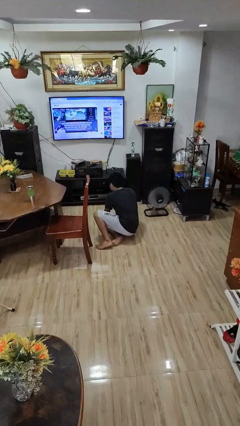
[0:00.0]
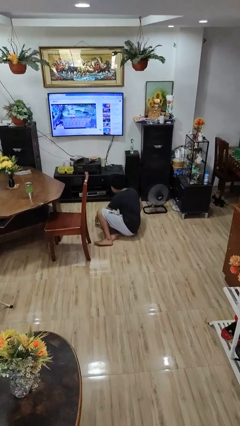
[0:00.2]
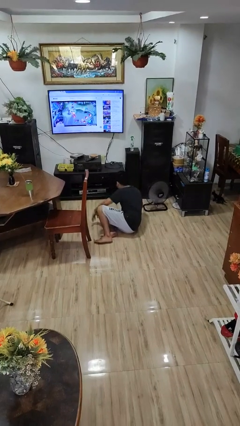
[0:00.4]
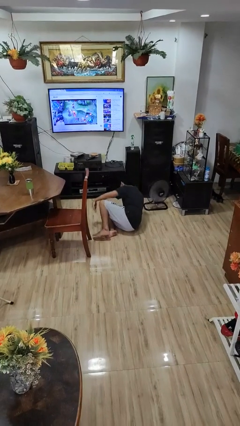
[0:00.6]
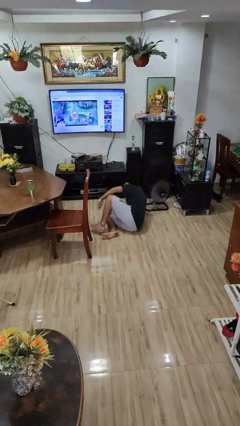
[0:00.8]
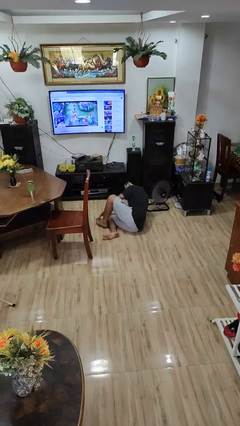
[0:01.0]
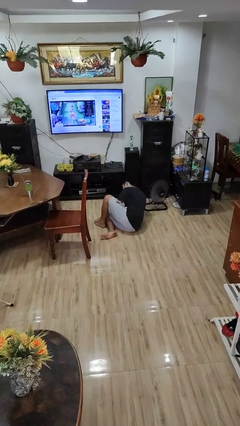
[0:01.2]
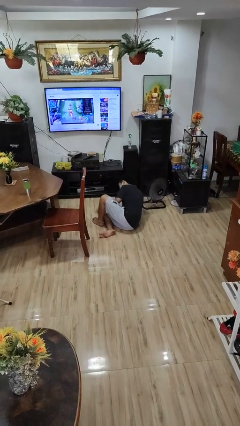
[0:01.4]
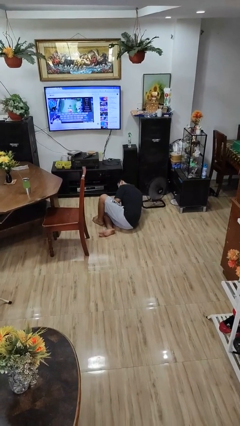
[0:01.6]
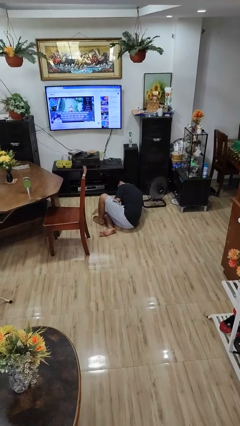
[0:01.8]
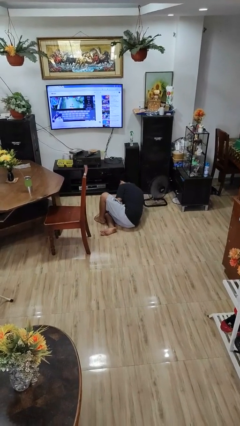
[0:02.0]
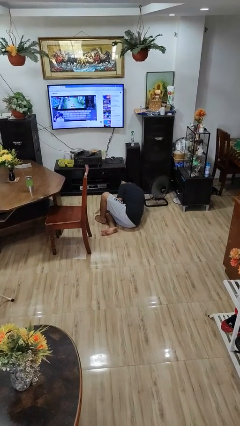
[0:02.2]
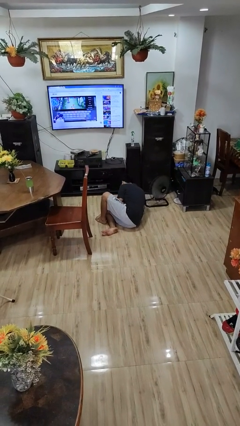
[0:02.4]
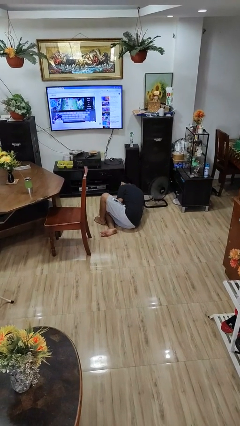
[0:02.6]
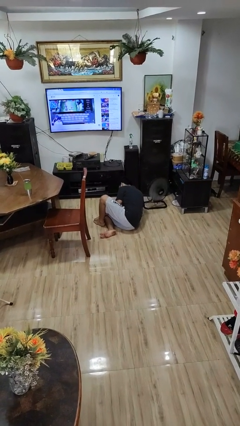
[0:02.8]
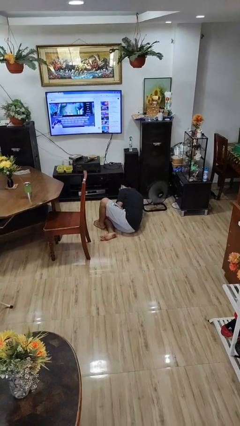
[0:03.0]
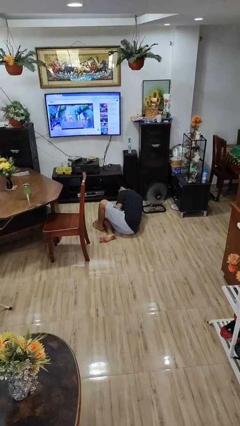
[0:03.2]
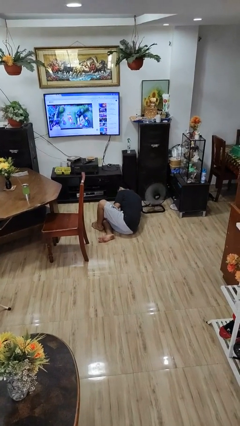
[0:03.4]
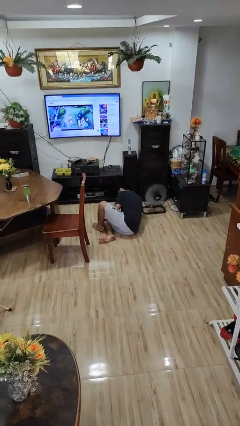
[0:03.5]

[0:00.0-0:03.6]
person lies down on floor

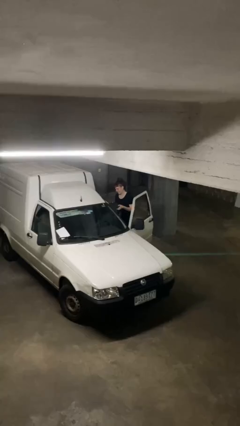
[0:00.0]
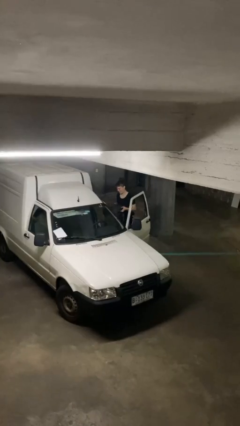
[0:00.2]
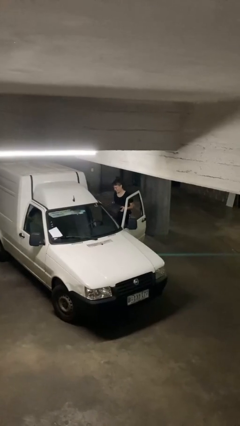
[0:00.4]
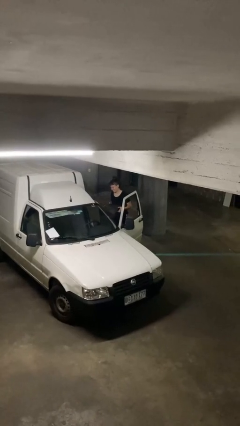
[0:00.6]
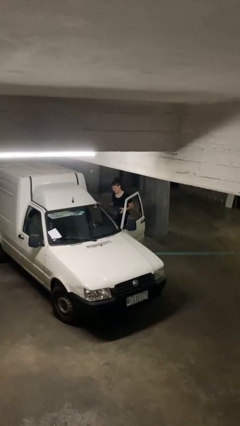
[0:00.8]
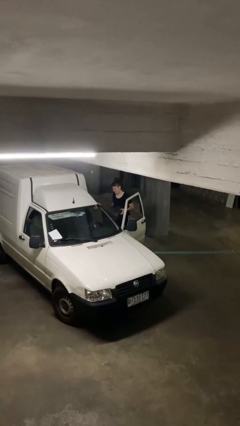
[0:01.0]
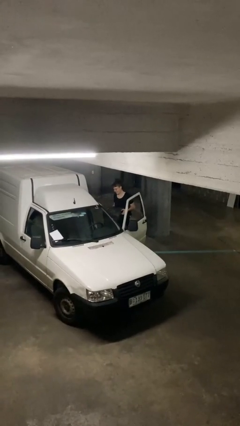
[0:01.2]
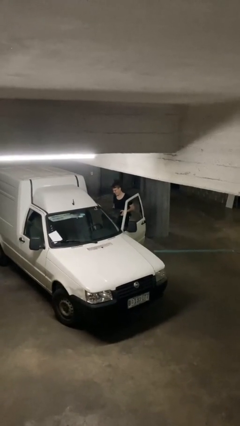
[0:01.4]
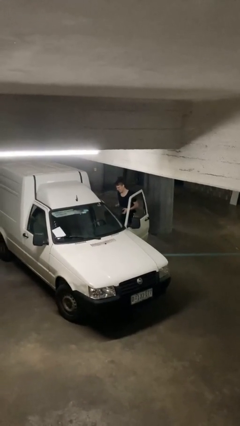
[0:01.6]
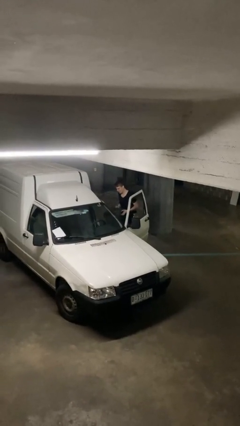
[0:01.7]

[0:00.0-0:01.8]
person unloads car

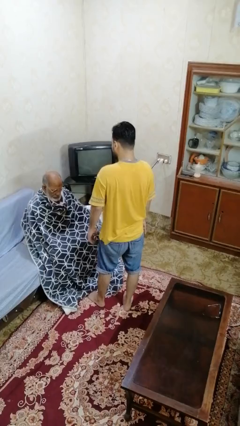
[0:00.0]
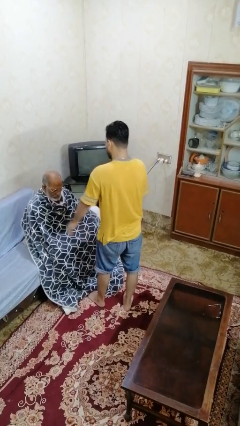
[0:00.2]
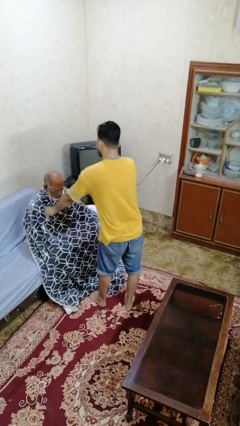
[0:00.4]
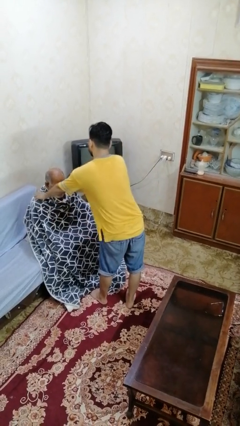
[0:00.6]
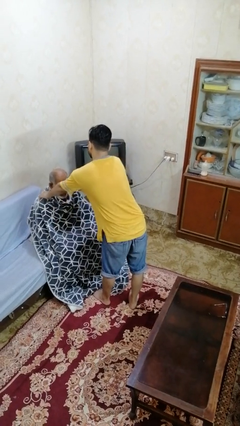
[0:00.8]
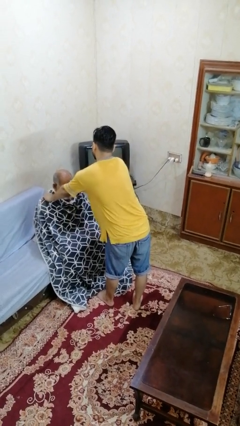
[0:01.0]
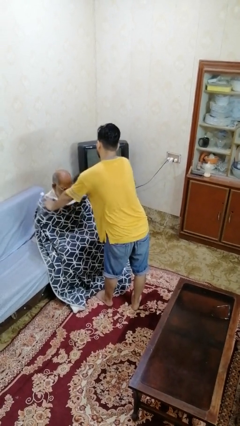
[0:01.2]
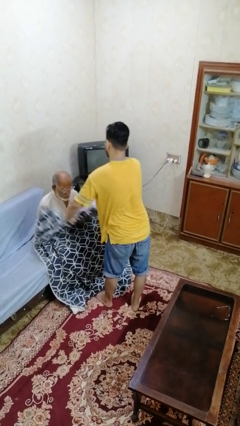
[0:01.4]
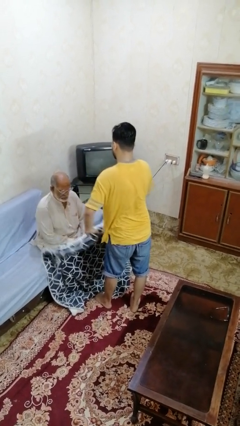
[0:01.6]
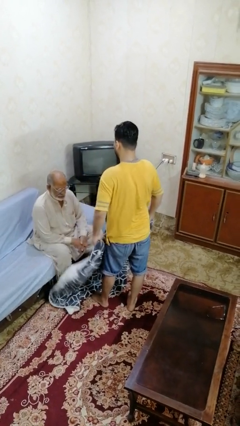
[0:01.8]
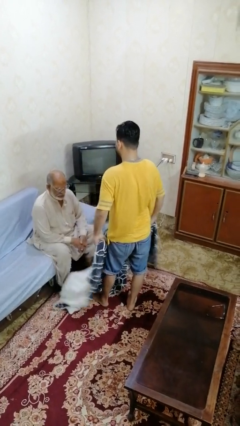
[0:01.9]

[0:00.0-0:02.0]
person uncovers friend with blanket

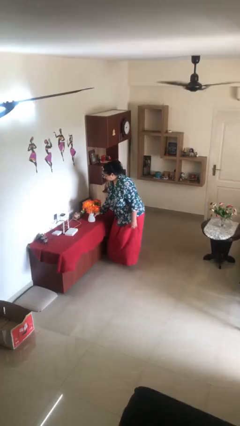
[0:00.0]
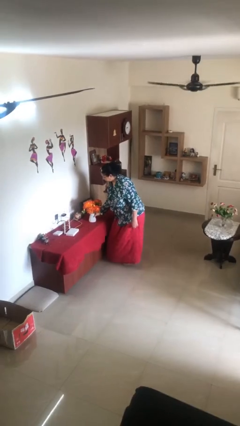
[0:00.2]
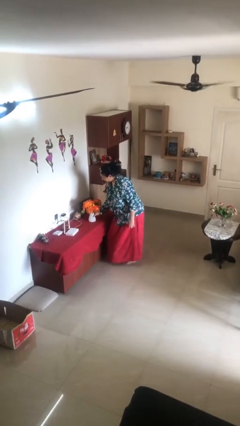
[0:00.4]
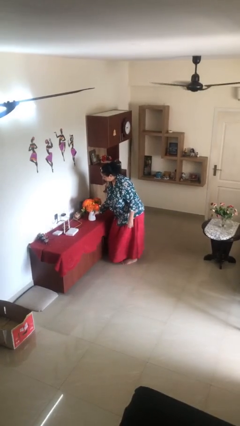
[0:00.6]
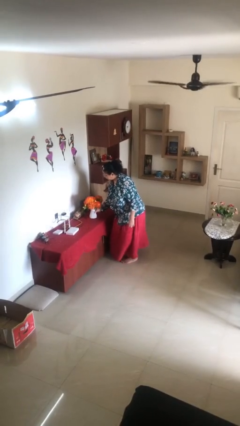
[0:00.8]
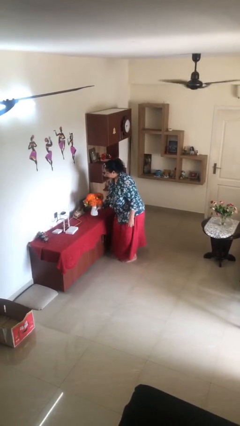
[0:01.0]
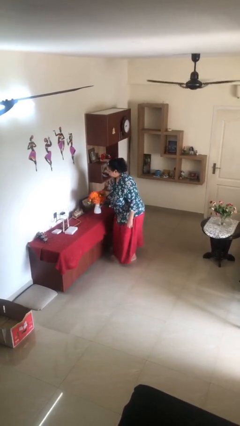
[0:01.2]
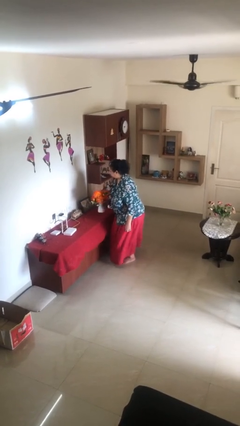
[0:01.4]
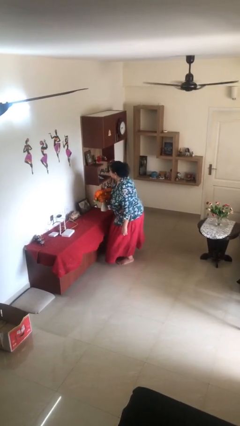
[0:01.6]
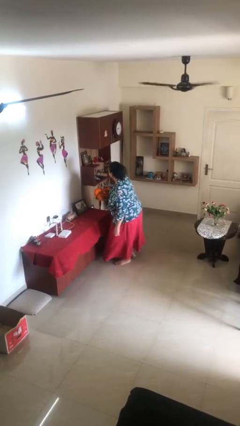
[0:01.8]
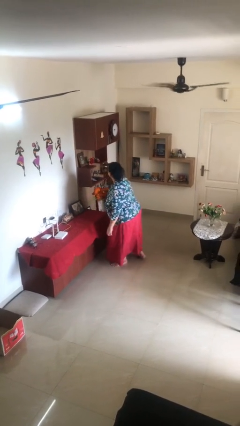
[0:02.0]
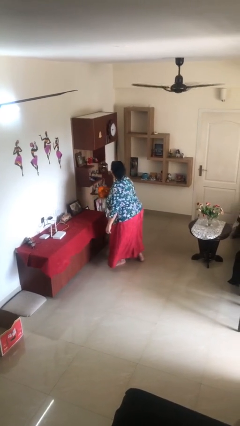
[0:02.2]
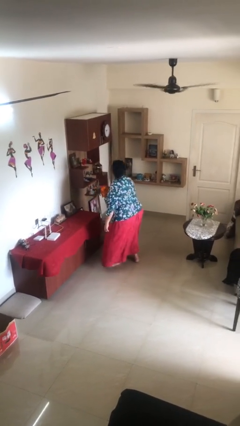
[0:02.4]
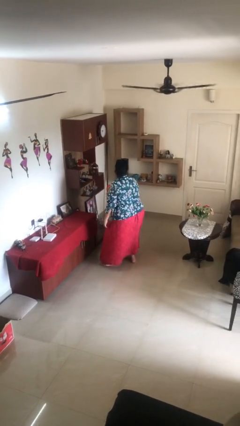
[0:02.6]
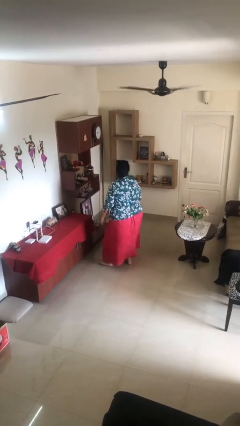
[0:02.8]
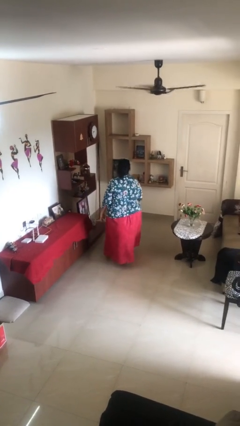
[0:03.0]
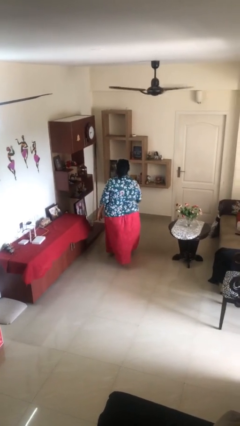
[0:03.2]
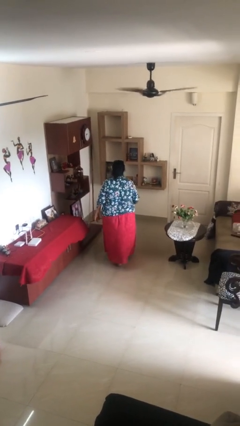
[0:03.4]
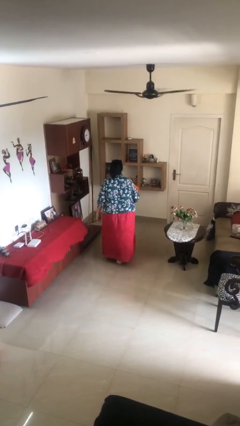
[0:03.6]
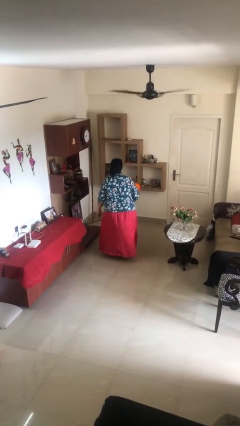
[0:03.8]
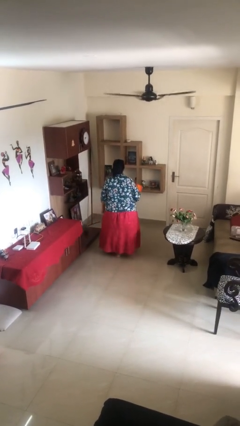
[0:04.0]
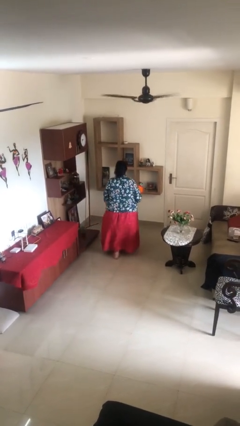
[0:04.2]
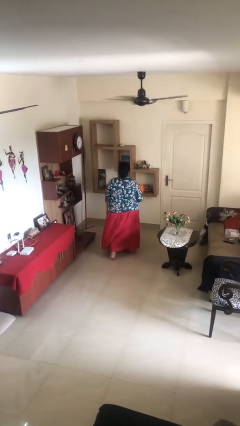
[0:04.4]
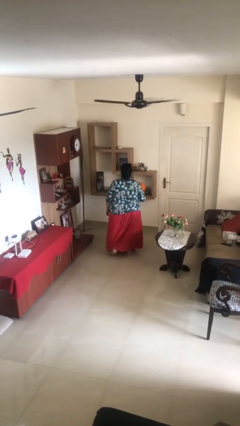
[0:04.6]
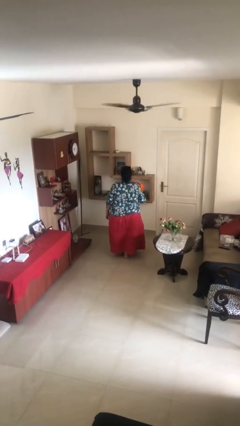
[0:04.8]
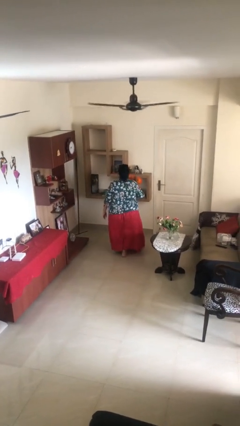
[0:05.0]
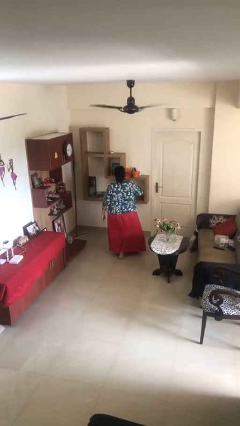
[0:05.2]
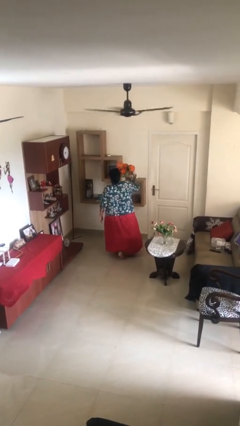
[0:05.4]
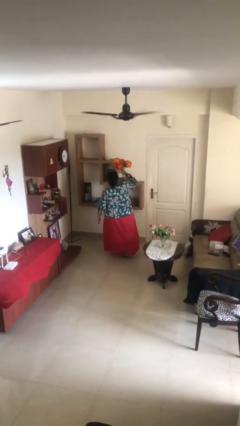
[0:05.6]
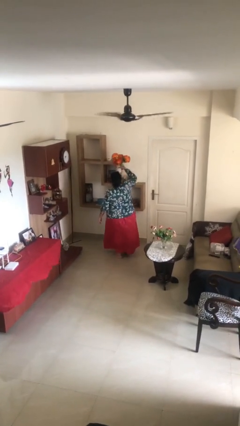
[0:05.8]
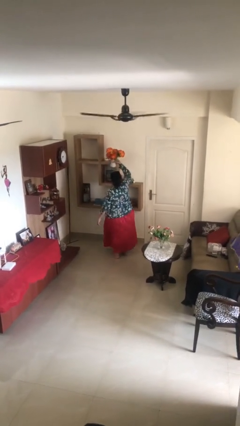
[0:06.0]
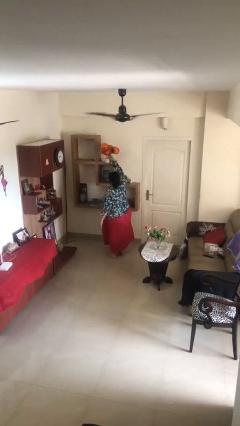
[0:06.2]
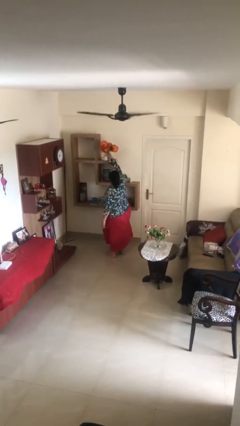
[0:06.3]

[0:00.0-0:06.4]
person picks up object from table

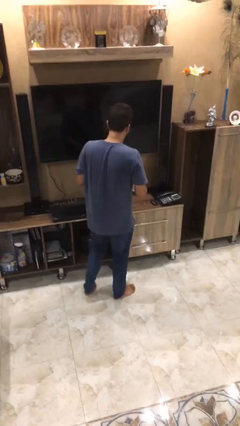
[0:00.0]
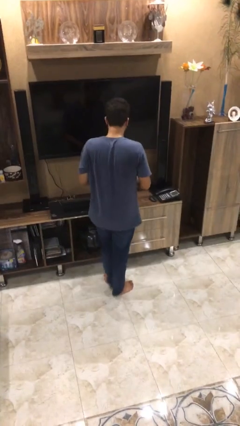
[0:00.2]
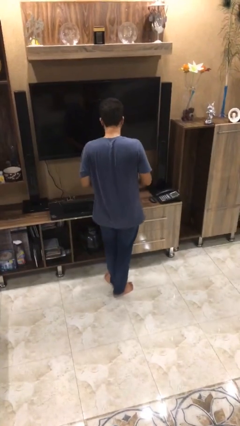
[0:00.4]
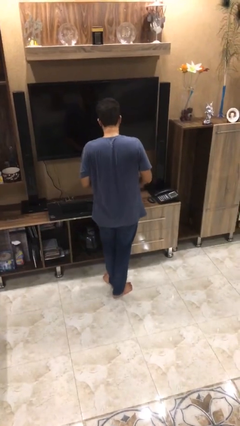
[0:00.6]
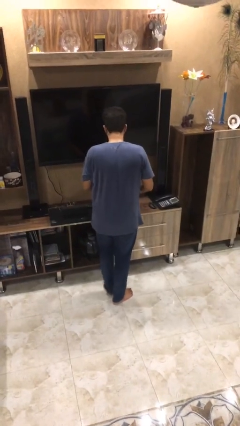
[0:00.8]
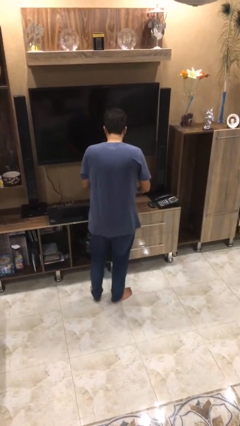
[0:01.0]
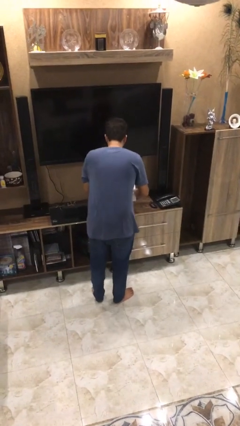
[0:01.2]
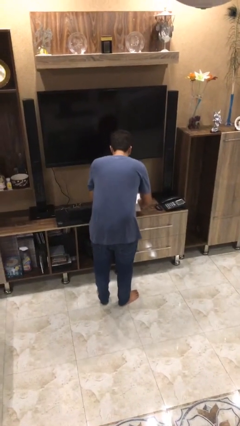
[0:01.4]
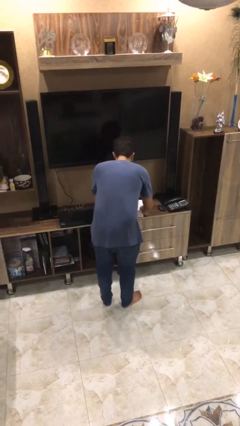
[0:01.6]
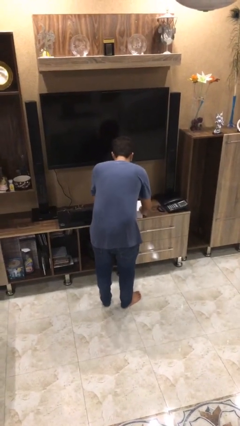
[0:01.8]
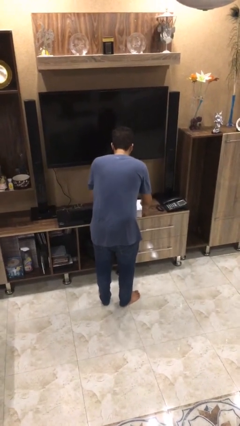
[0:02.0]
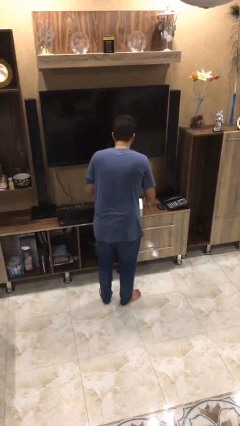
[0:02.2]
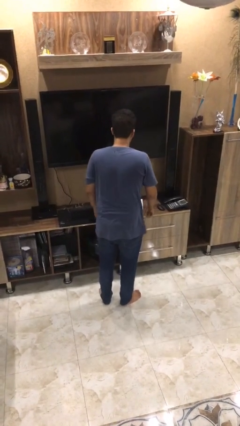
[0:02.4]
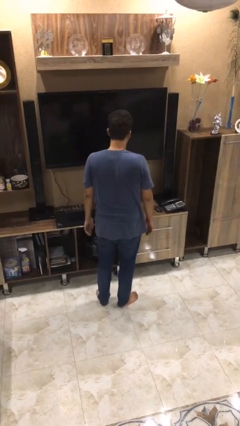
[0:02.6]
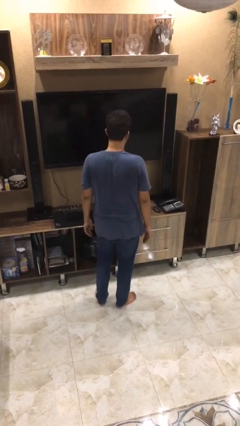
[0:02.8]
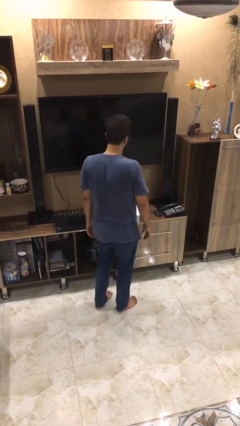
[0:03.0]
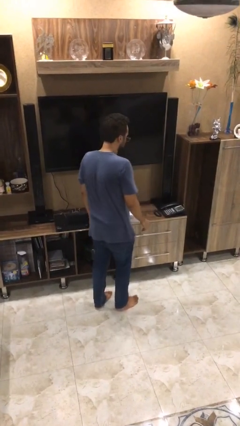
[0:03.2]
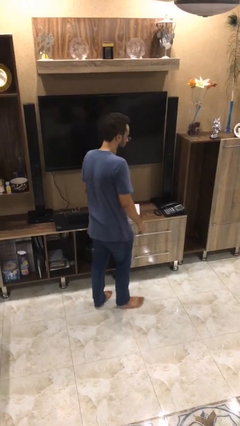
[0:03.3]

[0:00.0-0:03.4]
person puts down object on table

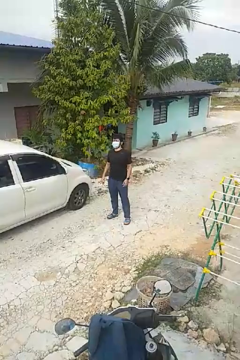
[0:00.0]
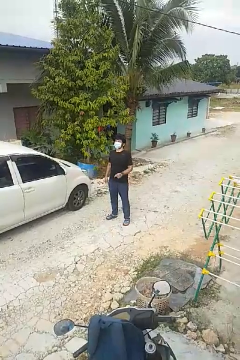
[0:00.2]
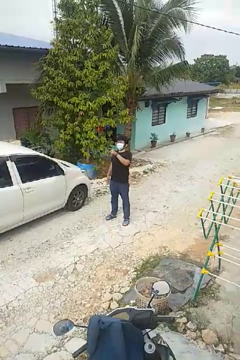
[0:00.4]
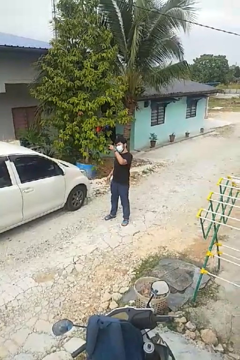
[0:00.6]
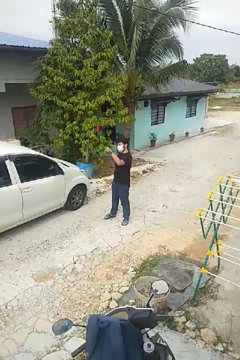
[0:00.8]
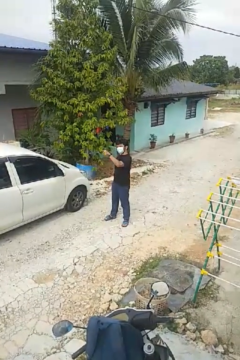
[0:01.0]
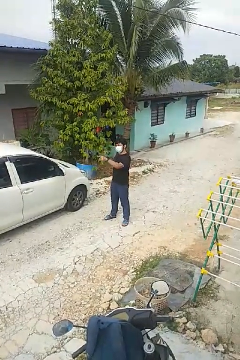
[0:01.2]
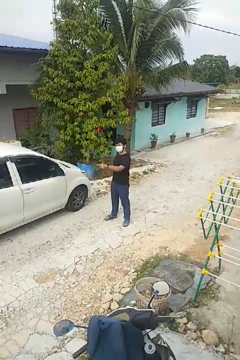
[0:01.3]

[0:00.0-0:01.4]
person points at person
